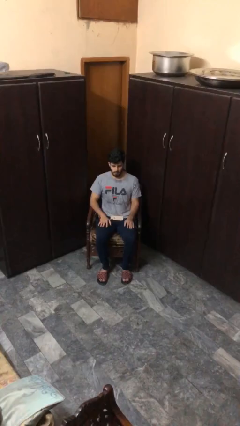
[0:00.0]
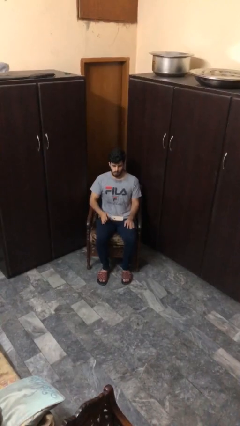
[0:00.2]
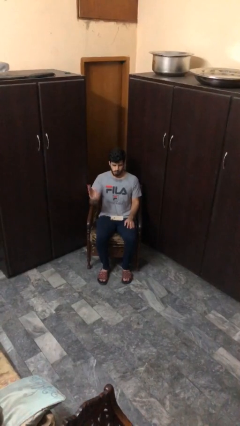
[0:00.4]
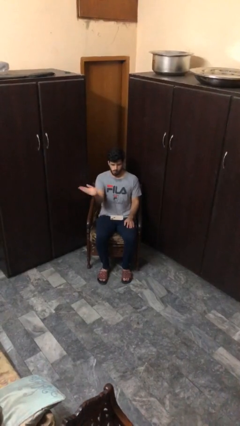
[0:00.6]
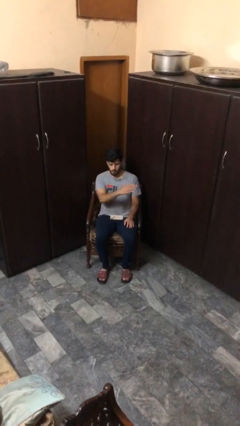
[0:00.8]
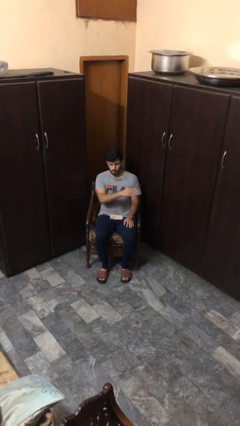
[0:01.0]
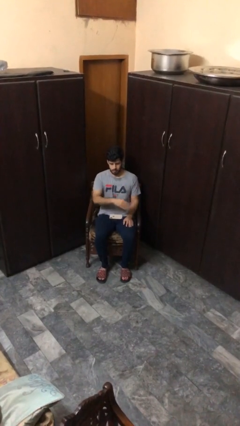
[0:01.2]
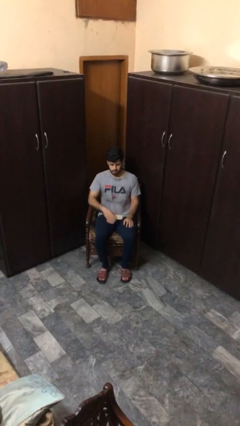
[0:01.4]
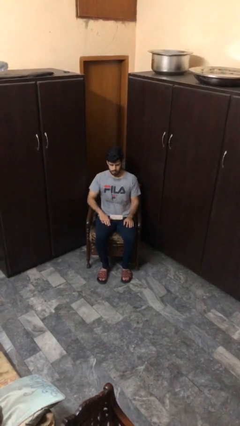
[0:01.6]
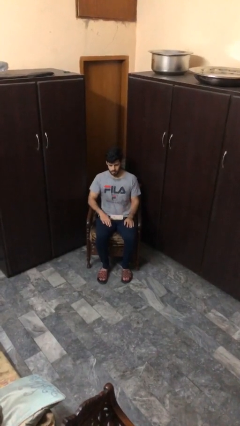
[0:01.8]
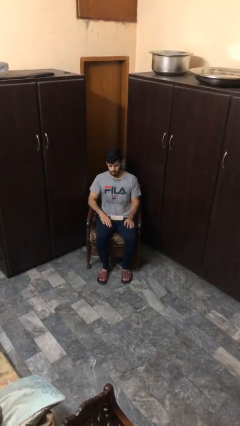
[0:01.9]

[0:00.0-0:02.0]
person gestures swipe left

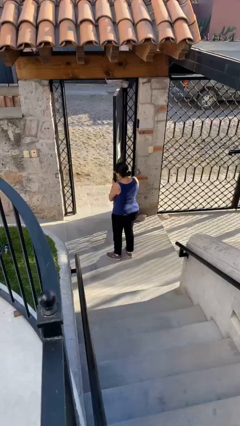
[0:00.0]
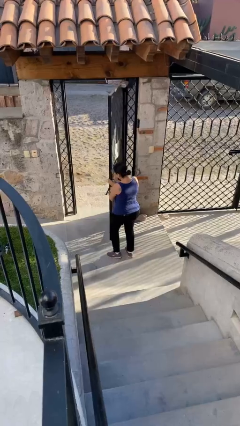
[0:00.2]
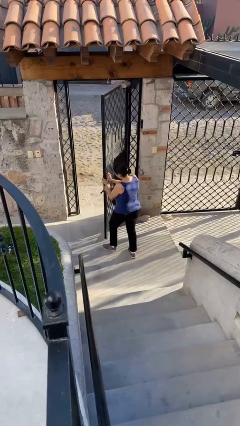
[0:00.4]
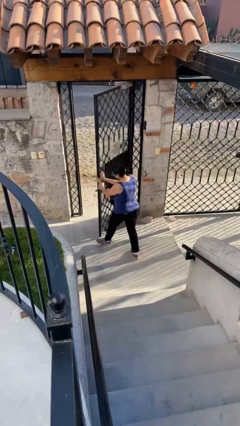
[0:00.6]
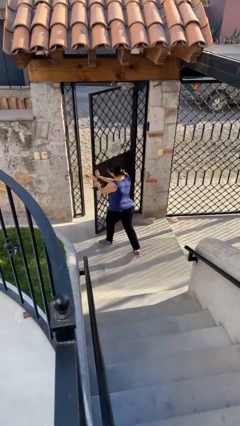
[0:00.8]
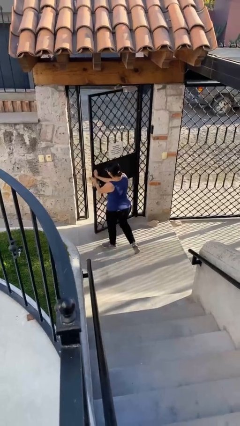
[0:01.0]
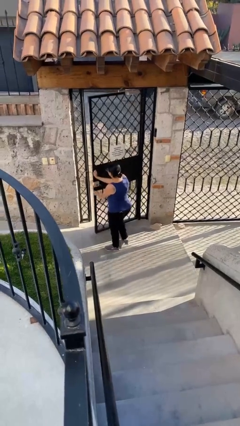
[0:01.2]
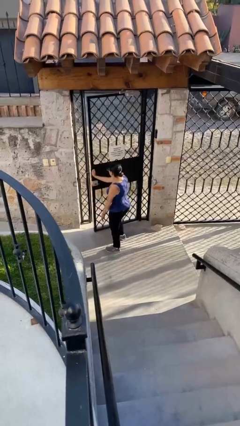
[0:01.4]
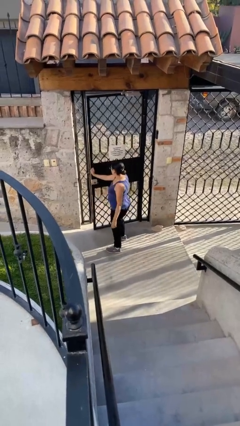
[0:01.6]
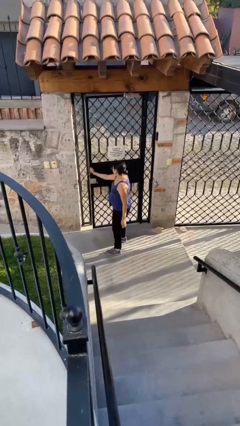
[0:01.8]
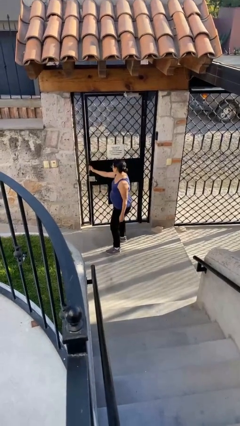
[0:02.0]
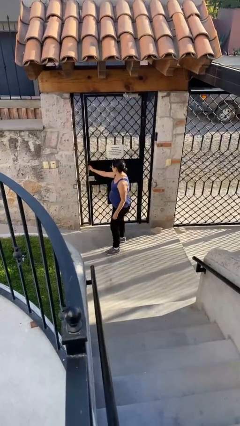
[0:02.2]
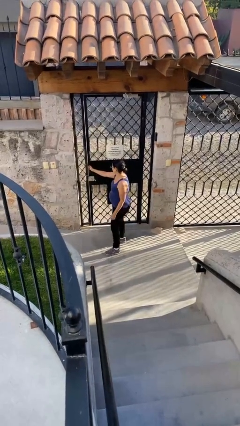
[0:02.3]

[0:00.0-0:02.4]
person closes facility door

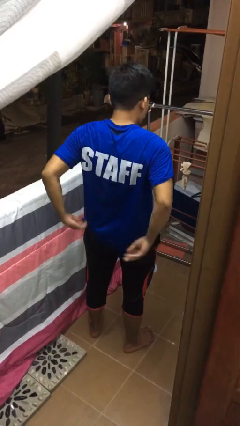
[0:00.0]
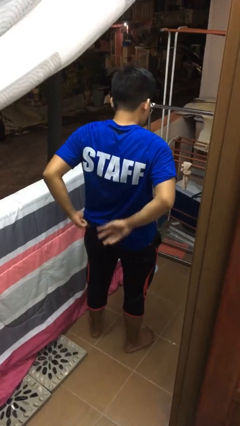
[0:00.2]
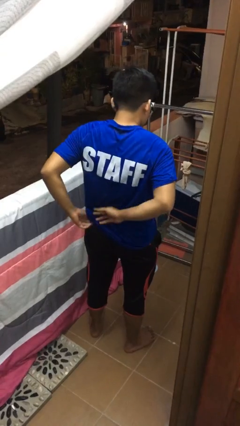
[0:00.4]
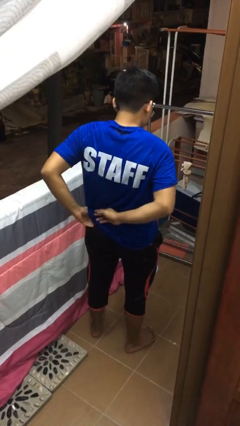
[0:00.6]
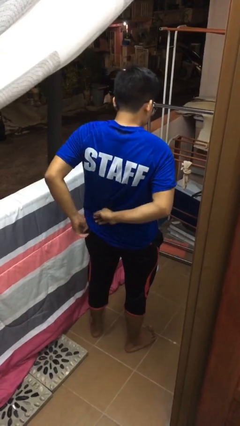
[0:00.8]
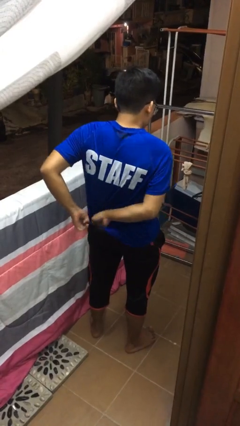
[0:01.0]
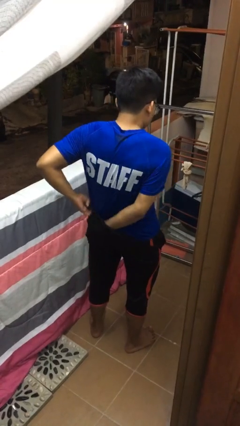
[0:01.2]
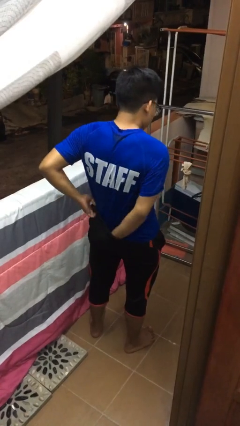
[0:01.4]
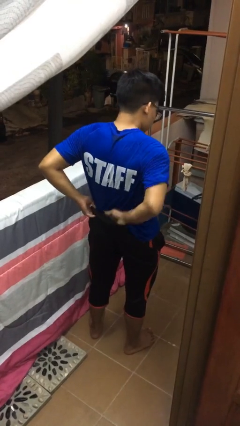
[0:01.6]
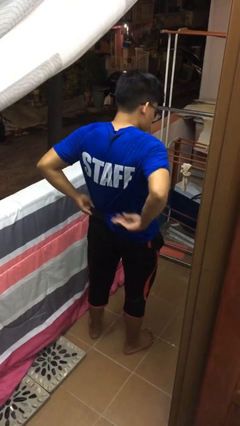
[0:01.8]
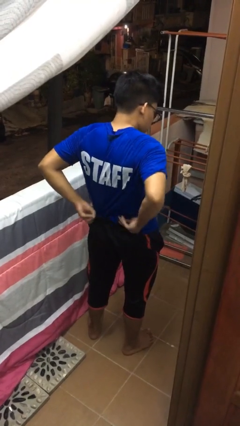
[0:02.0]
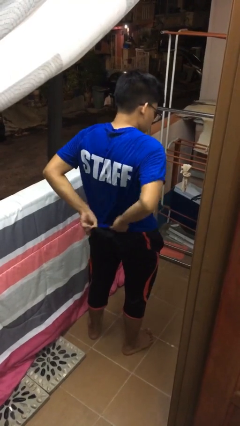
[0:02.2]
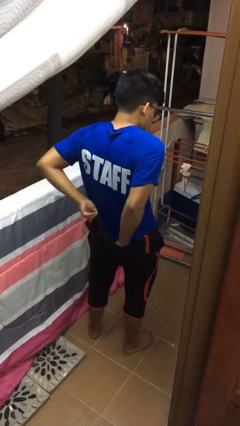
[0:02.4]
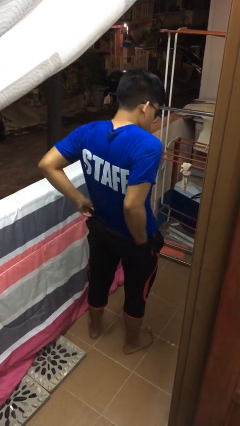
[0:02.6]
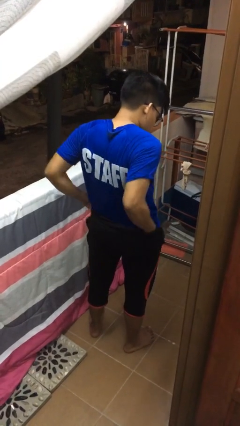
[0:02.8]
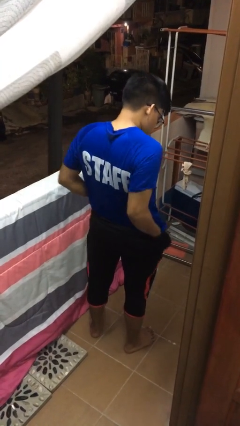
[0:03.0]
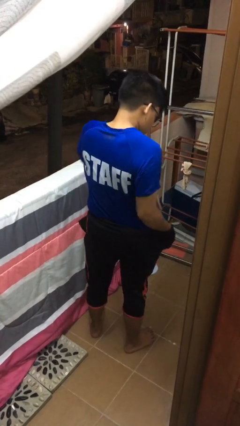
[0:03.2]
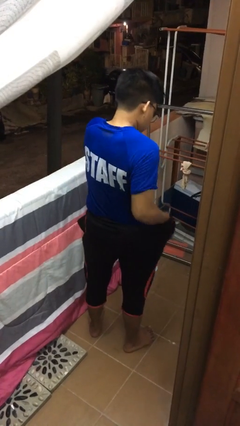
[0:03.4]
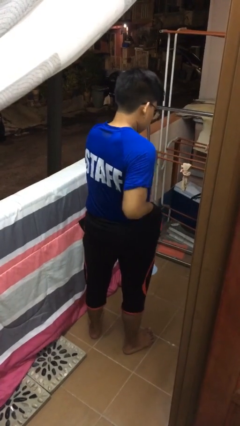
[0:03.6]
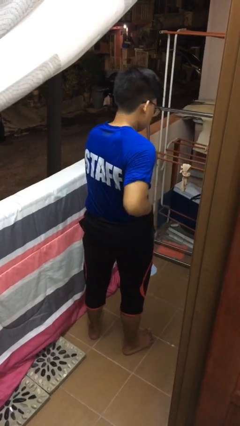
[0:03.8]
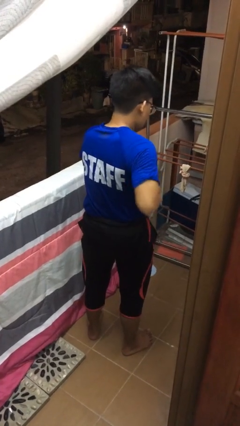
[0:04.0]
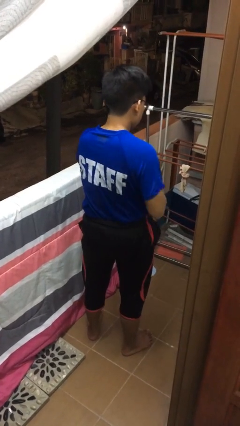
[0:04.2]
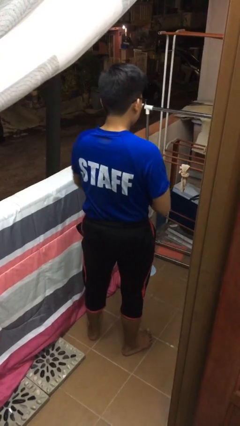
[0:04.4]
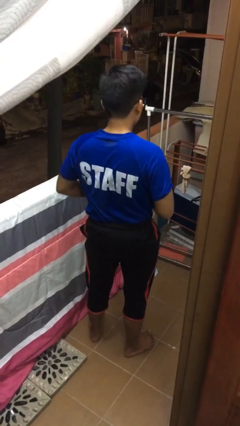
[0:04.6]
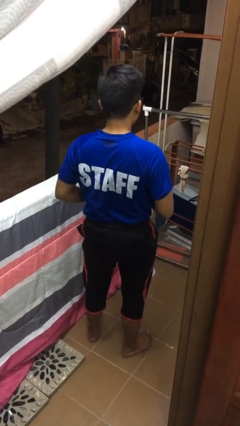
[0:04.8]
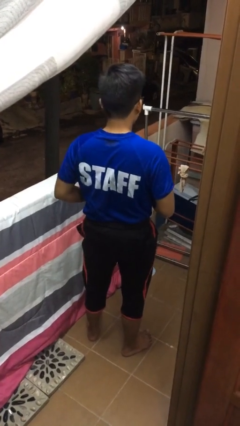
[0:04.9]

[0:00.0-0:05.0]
person tucks in shirt

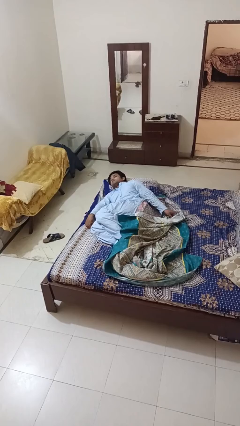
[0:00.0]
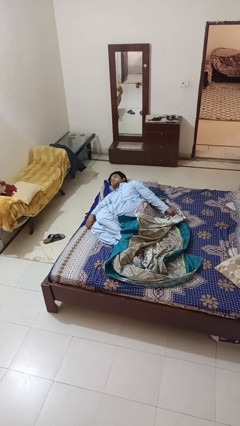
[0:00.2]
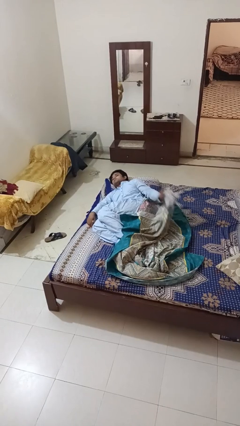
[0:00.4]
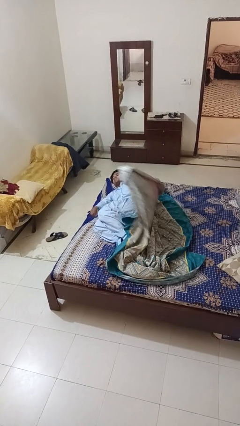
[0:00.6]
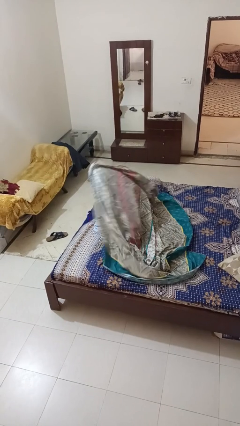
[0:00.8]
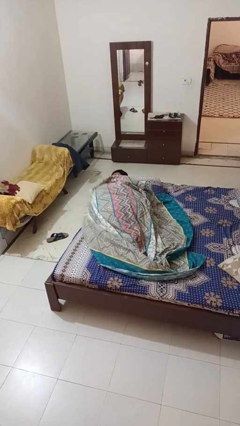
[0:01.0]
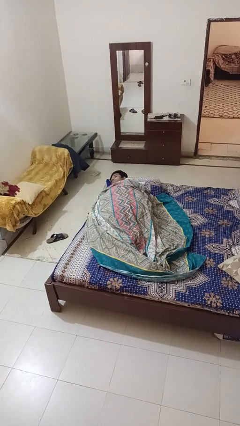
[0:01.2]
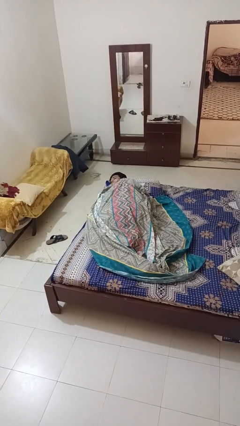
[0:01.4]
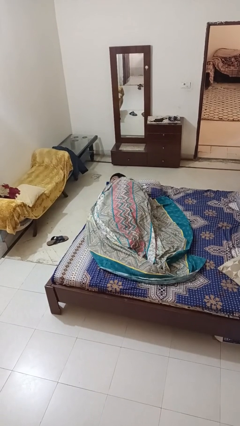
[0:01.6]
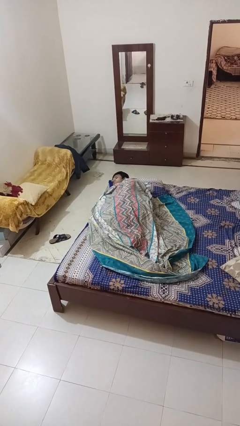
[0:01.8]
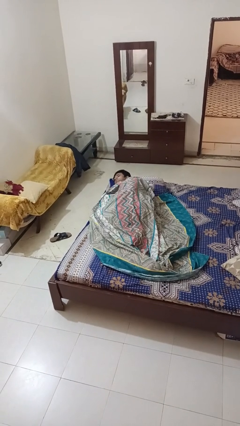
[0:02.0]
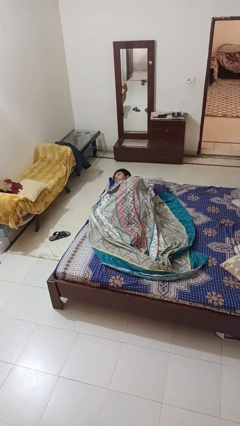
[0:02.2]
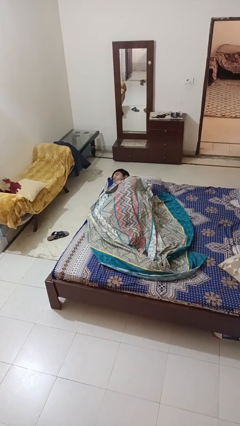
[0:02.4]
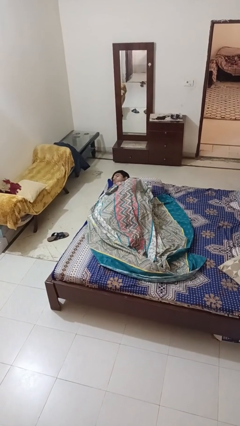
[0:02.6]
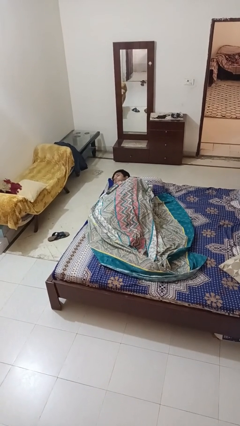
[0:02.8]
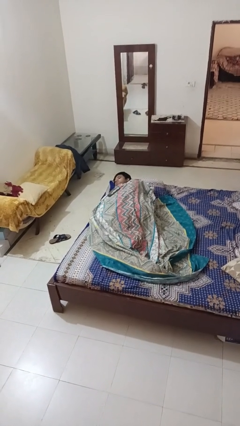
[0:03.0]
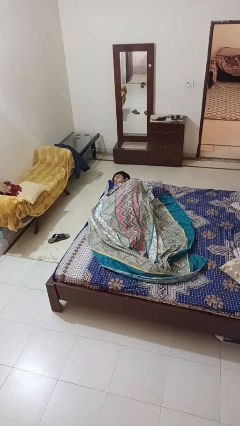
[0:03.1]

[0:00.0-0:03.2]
person covers with bedsheets

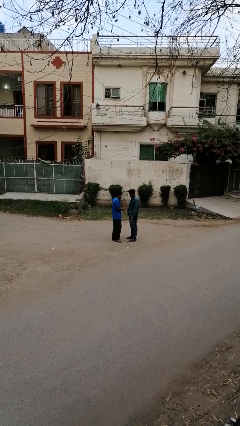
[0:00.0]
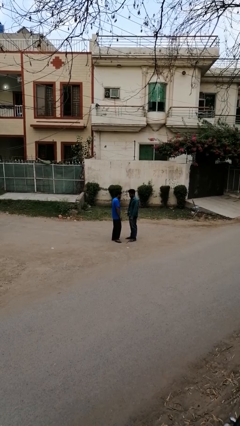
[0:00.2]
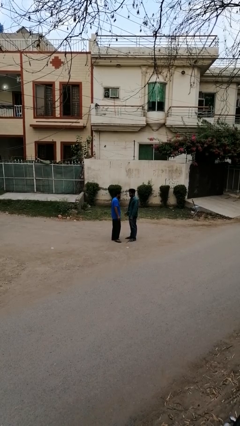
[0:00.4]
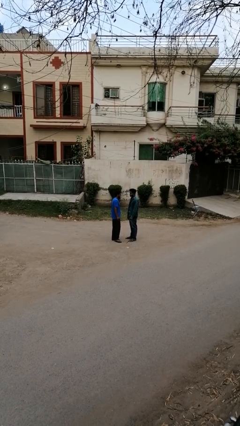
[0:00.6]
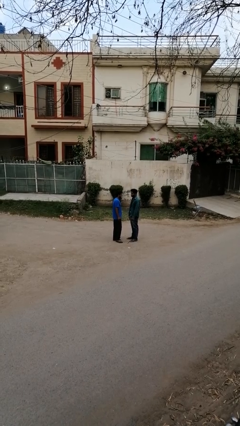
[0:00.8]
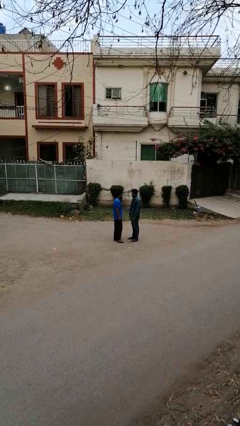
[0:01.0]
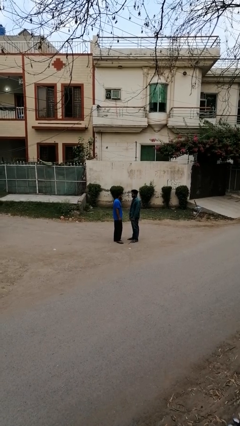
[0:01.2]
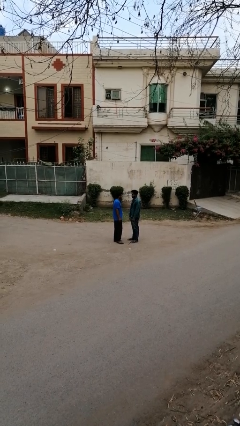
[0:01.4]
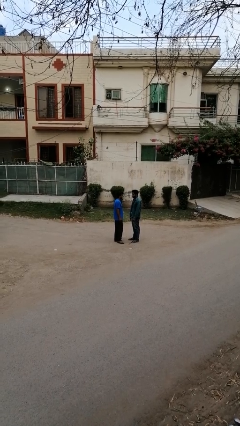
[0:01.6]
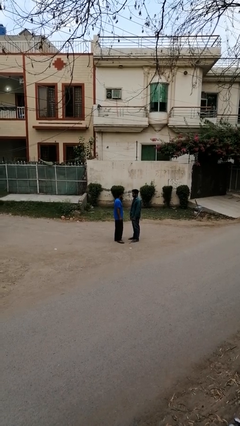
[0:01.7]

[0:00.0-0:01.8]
person highfives hand

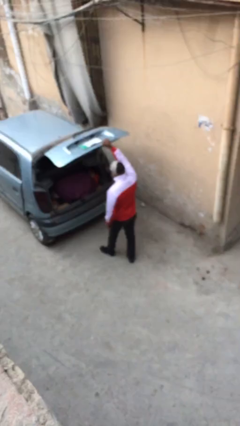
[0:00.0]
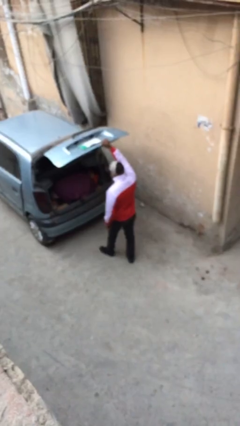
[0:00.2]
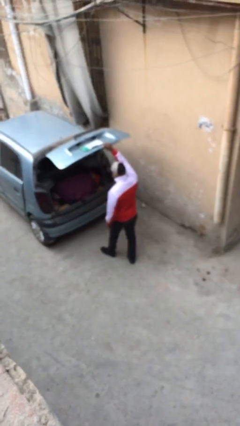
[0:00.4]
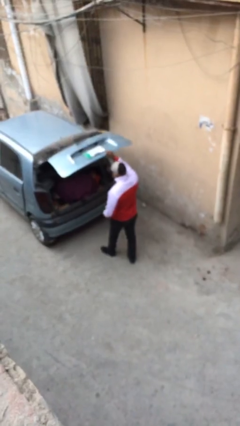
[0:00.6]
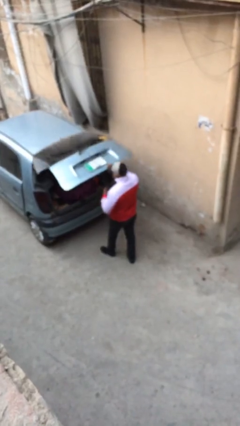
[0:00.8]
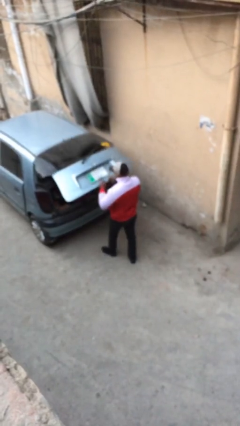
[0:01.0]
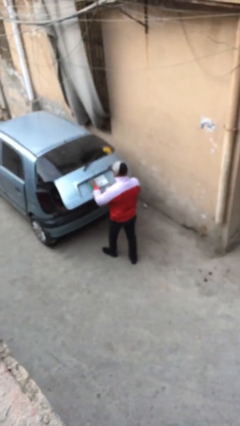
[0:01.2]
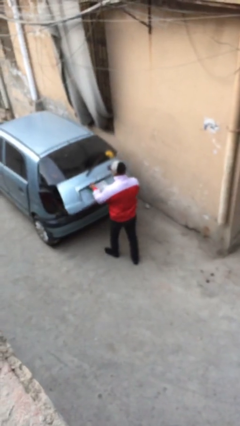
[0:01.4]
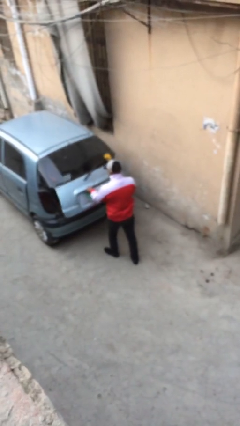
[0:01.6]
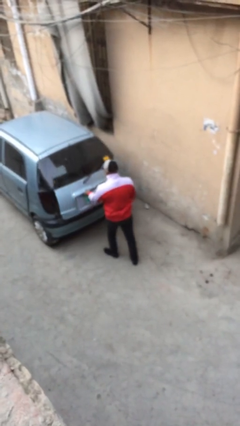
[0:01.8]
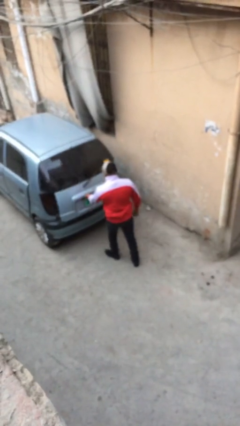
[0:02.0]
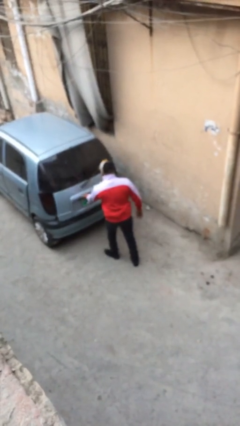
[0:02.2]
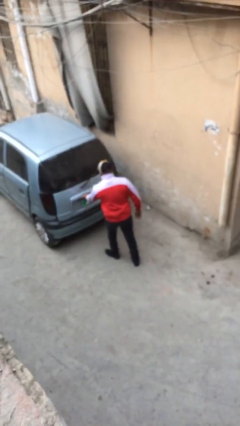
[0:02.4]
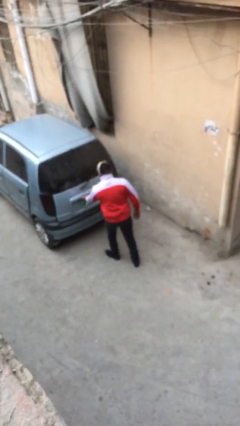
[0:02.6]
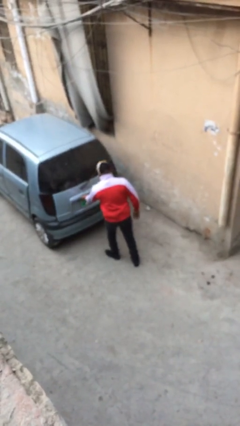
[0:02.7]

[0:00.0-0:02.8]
person closes car trunk

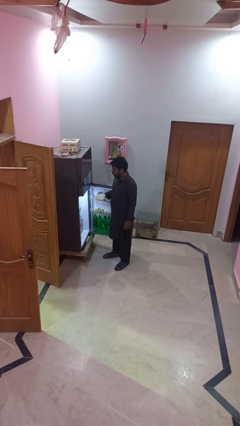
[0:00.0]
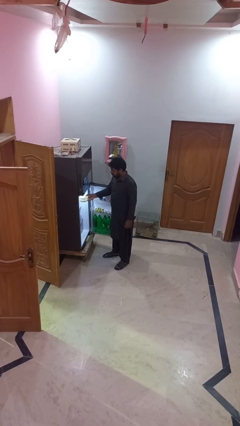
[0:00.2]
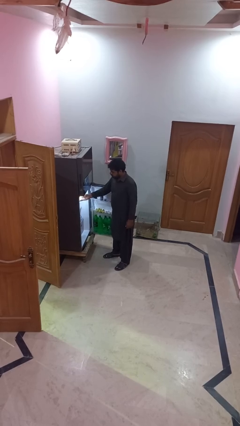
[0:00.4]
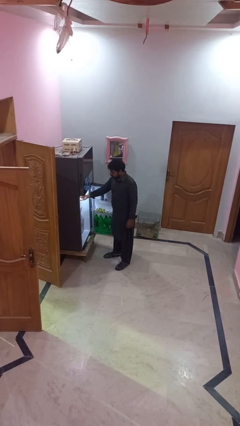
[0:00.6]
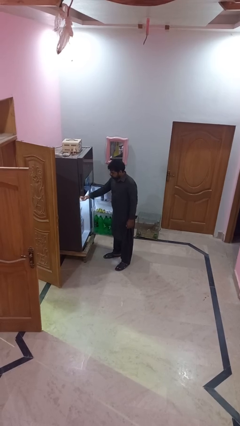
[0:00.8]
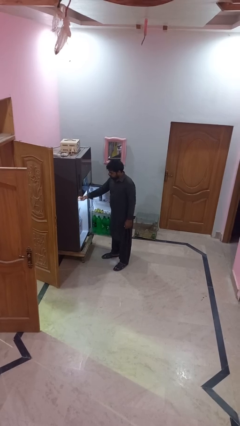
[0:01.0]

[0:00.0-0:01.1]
person puts object into refrigerator
